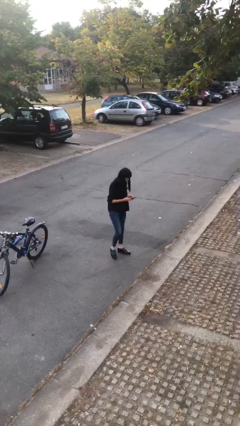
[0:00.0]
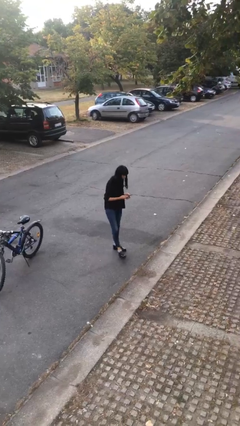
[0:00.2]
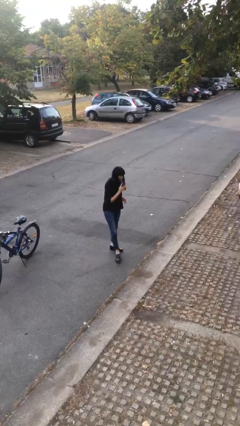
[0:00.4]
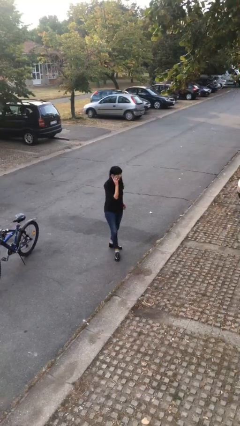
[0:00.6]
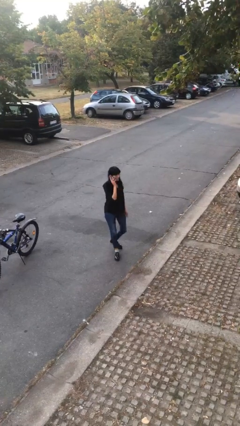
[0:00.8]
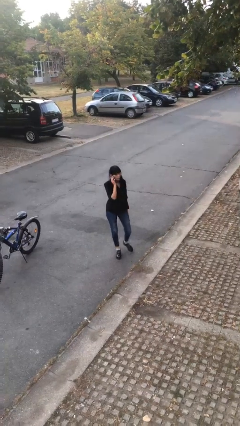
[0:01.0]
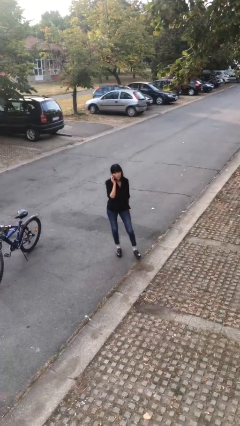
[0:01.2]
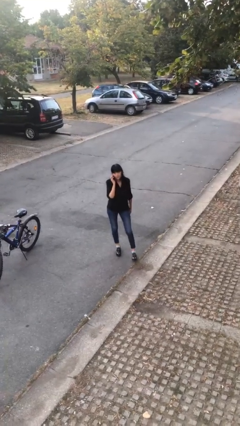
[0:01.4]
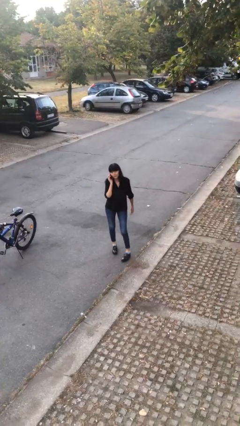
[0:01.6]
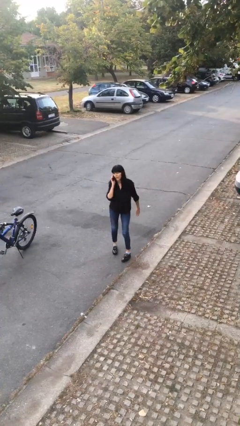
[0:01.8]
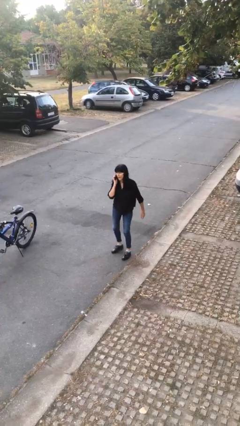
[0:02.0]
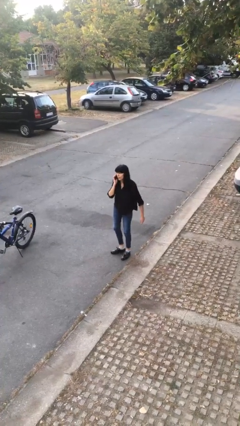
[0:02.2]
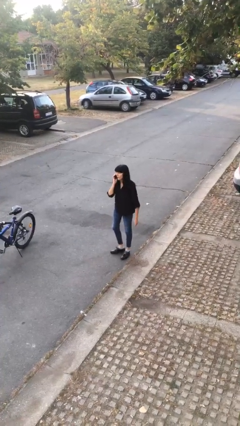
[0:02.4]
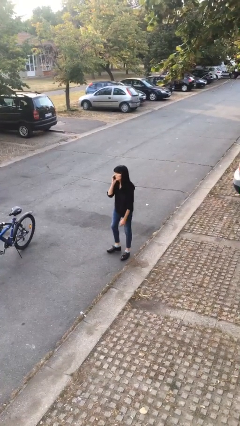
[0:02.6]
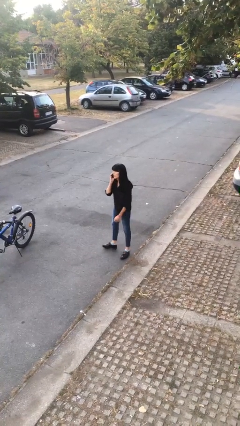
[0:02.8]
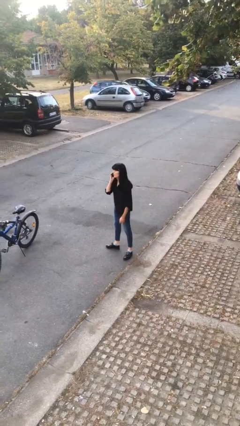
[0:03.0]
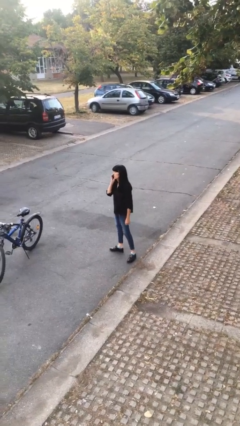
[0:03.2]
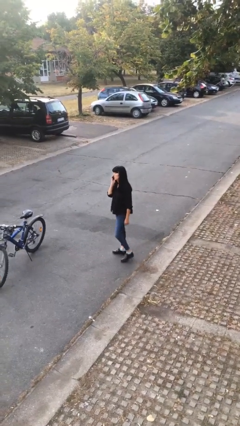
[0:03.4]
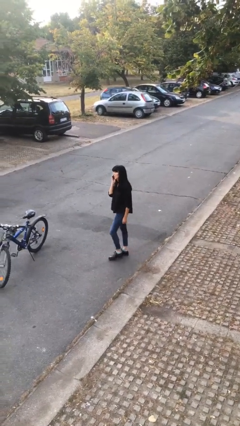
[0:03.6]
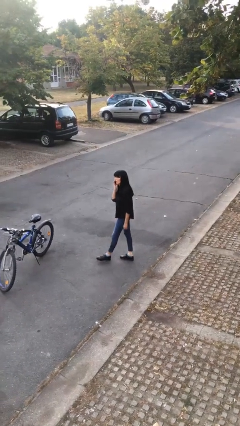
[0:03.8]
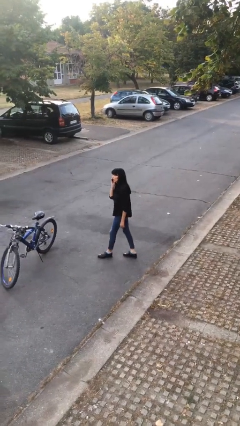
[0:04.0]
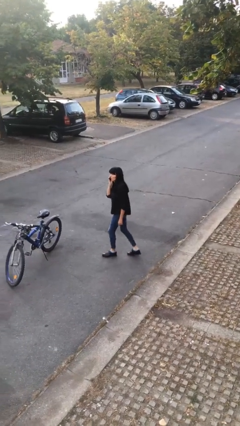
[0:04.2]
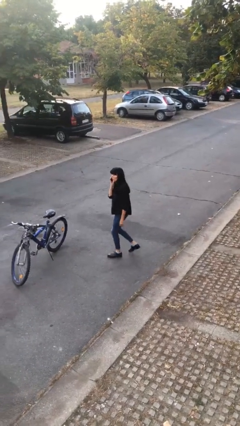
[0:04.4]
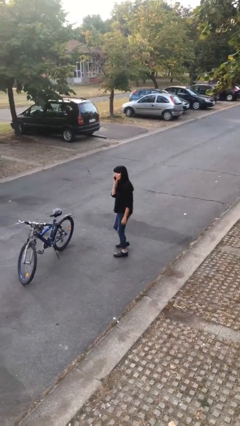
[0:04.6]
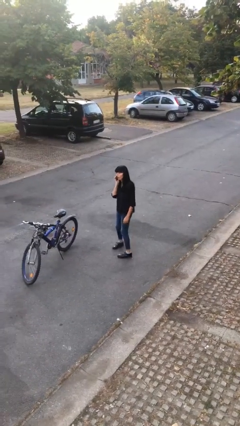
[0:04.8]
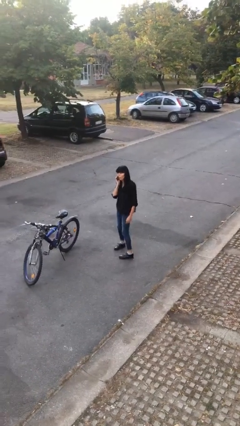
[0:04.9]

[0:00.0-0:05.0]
person talks on phone

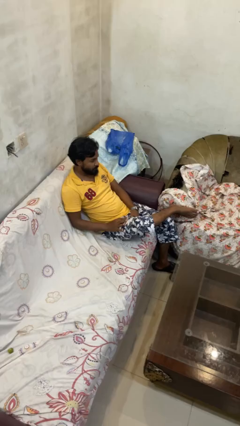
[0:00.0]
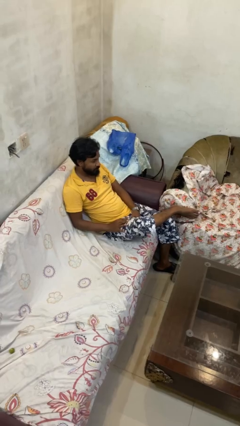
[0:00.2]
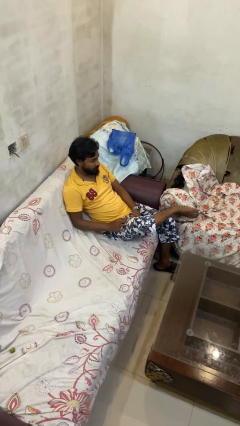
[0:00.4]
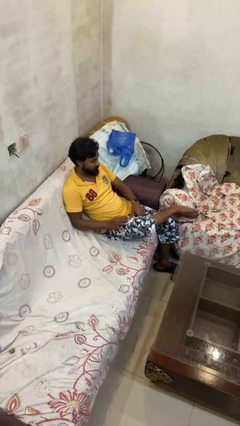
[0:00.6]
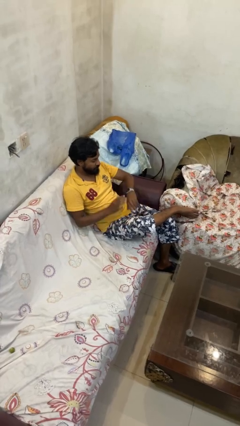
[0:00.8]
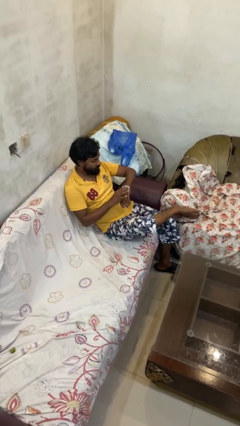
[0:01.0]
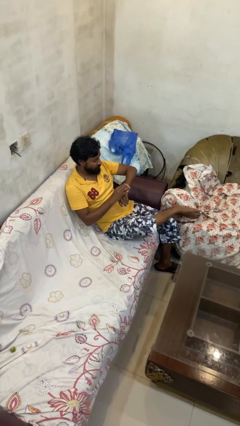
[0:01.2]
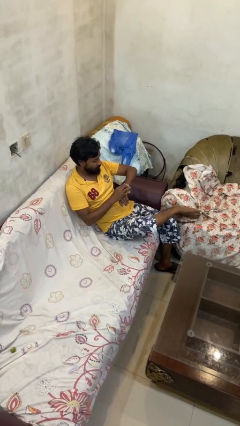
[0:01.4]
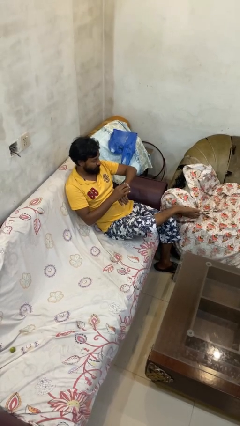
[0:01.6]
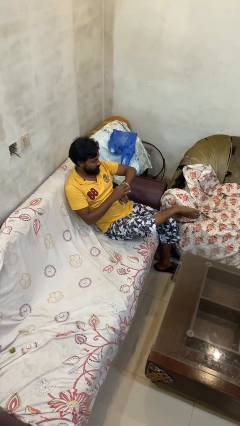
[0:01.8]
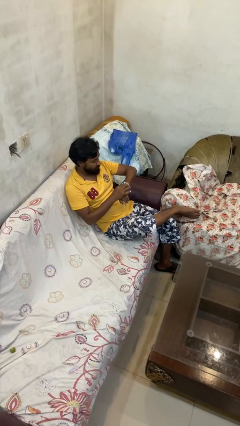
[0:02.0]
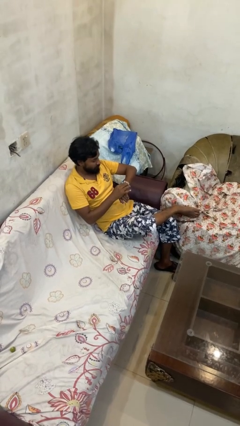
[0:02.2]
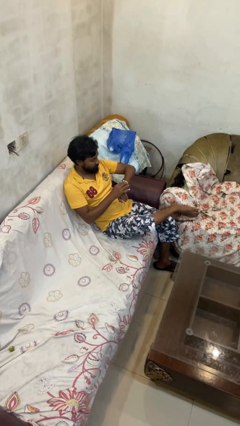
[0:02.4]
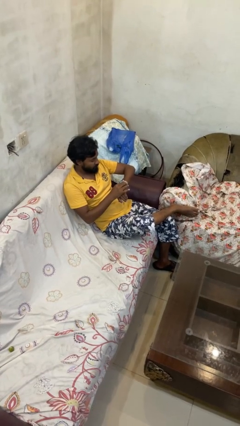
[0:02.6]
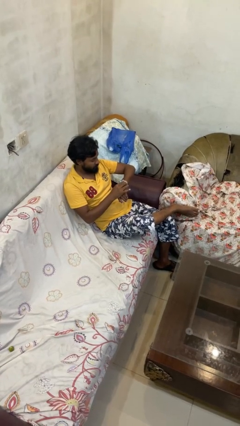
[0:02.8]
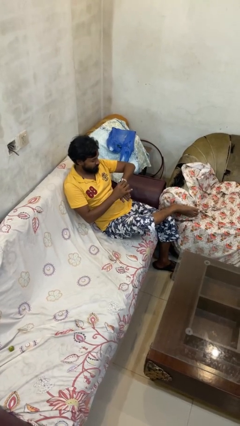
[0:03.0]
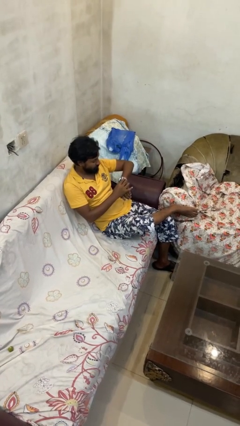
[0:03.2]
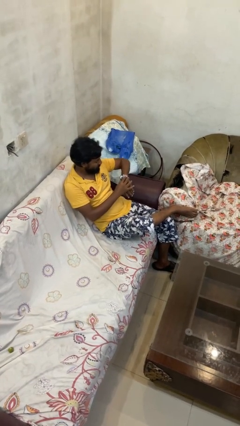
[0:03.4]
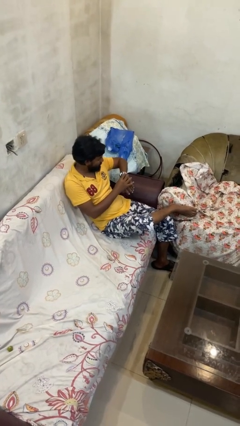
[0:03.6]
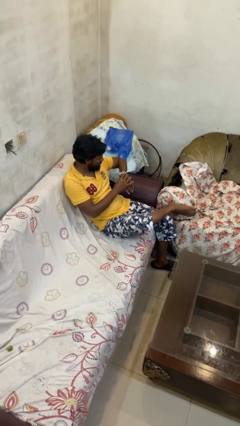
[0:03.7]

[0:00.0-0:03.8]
person looks at wristwatch

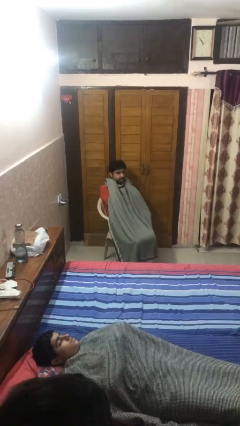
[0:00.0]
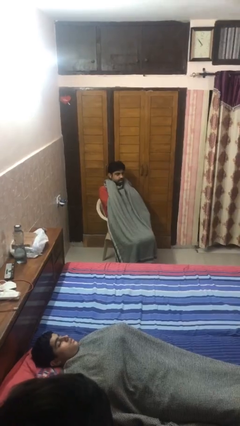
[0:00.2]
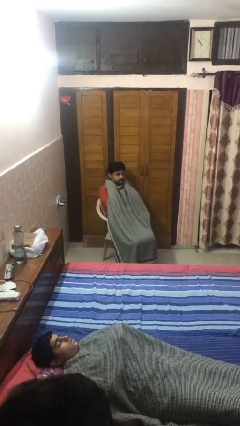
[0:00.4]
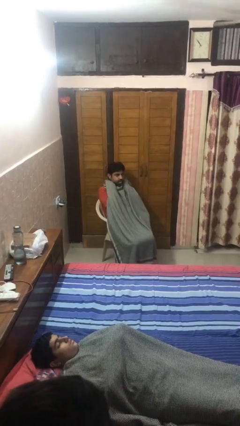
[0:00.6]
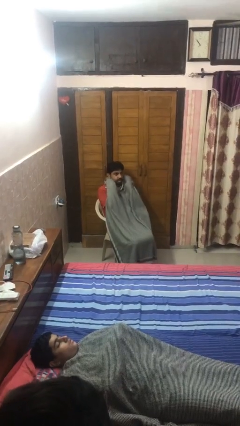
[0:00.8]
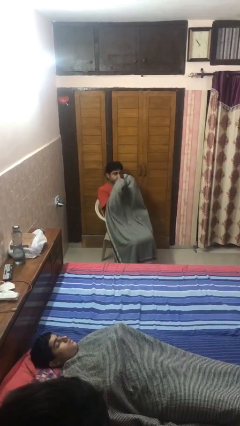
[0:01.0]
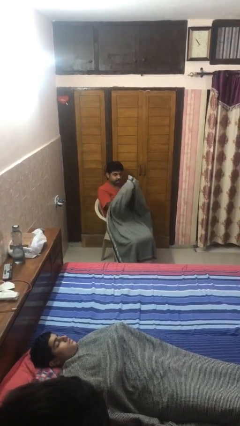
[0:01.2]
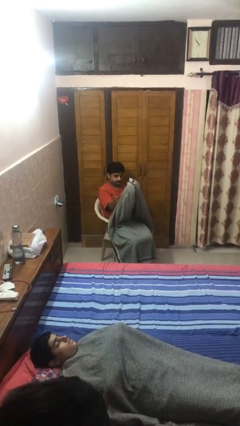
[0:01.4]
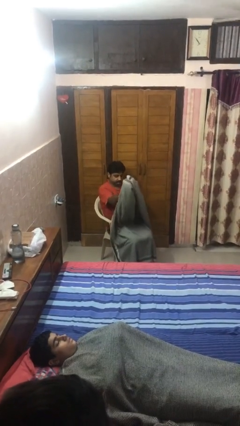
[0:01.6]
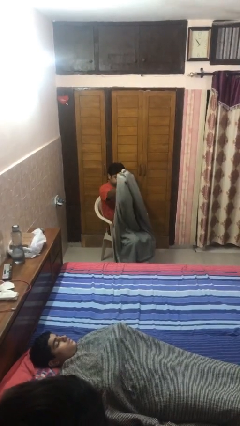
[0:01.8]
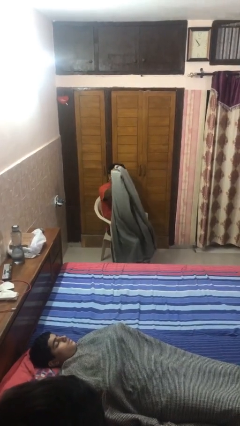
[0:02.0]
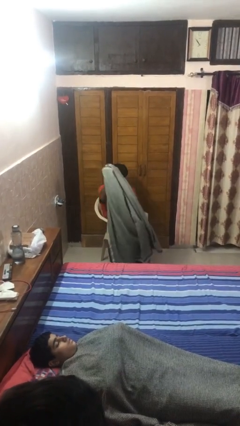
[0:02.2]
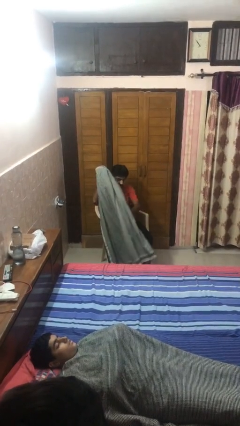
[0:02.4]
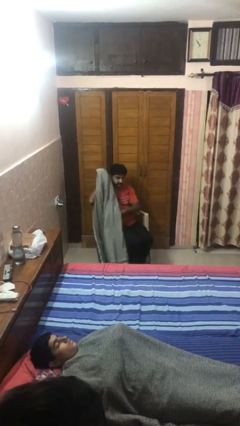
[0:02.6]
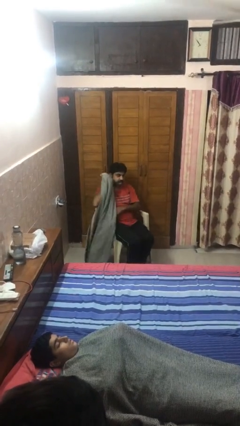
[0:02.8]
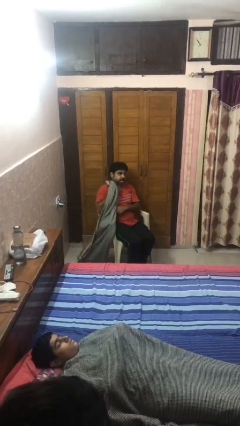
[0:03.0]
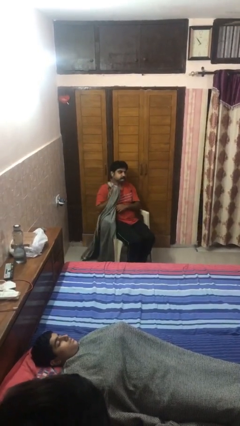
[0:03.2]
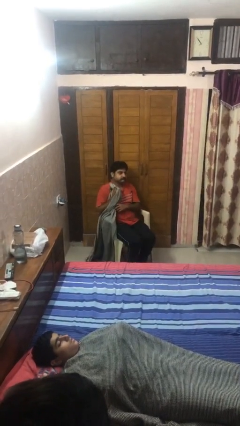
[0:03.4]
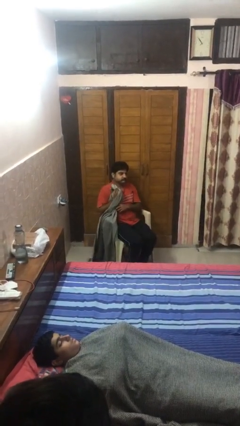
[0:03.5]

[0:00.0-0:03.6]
person uncovers with blanket

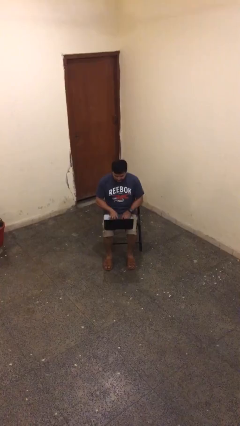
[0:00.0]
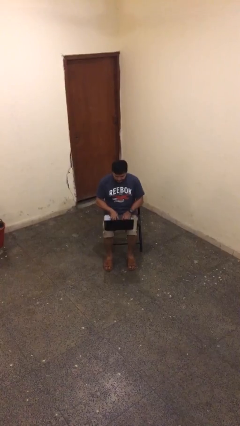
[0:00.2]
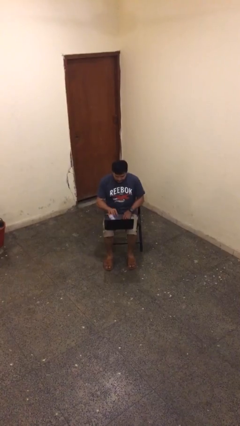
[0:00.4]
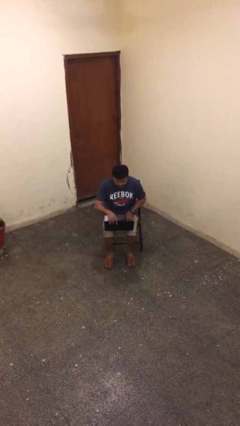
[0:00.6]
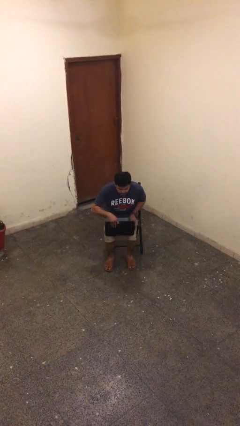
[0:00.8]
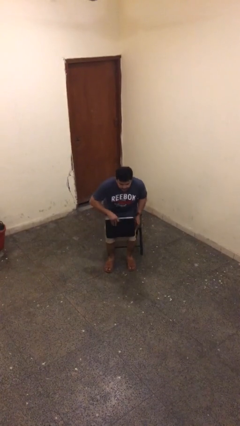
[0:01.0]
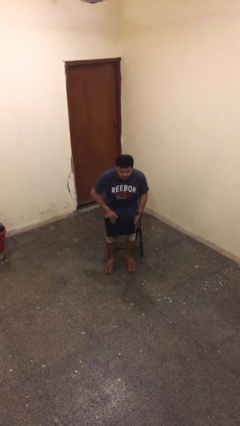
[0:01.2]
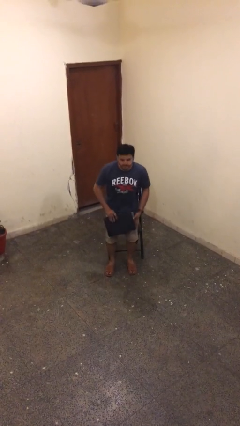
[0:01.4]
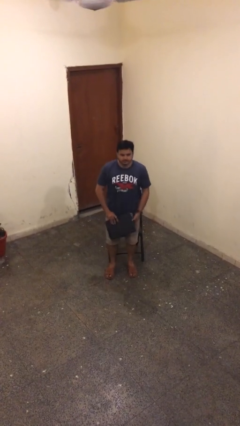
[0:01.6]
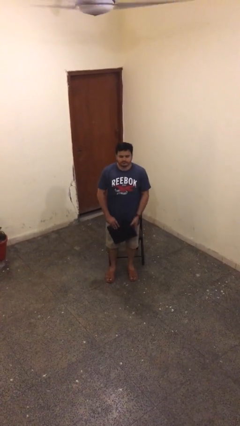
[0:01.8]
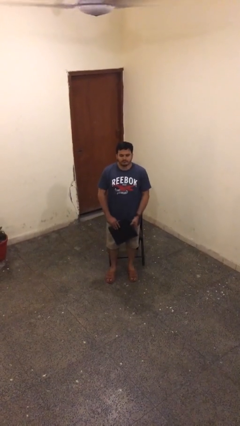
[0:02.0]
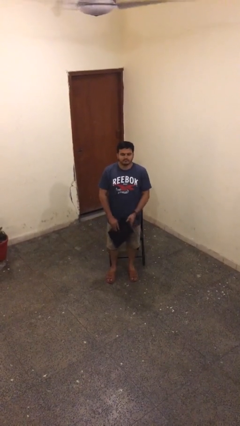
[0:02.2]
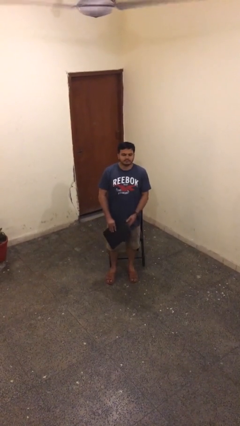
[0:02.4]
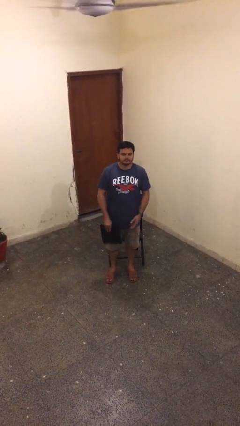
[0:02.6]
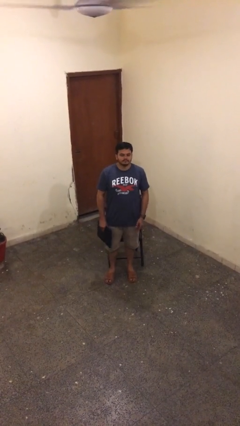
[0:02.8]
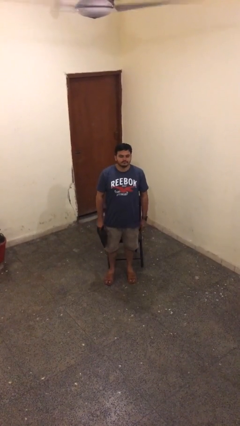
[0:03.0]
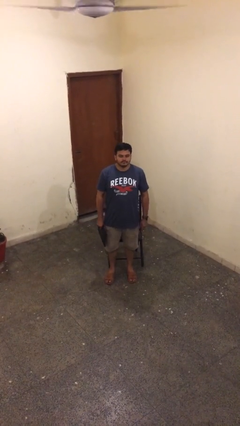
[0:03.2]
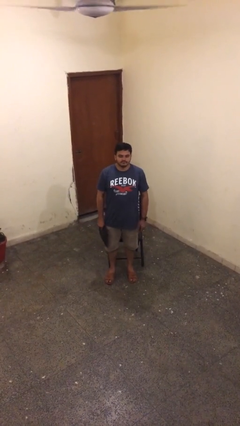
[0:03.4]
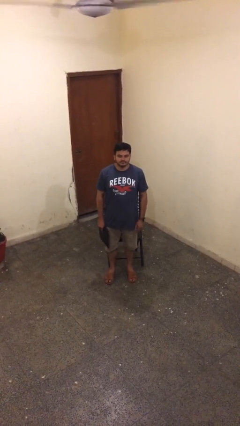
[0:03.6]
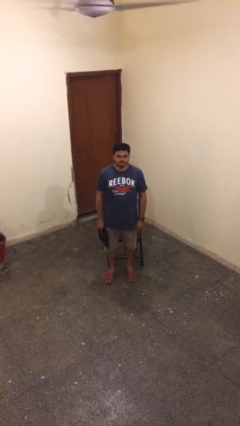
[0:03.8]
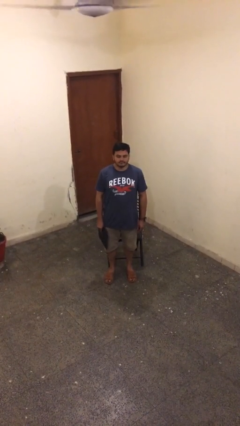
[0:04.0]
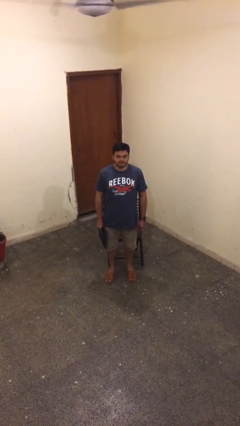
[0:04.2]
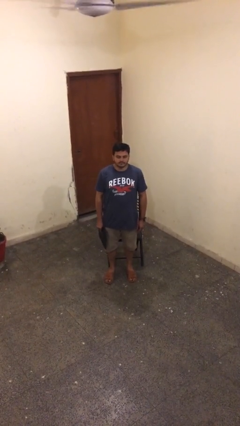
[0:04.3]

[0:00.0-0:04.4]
person stands up

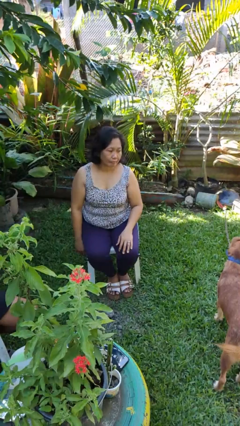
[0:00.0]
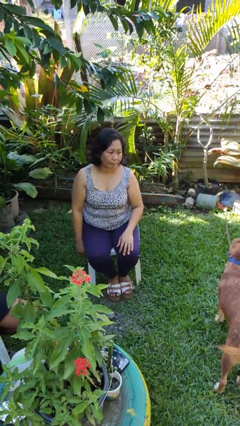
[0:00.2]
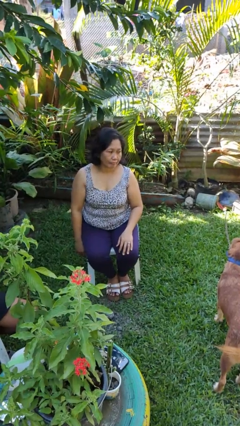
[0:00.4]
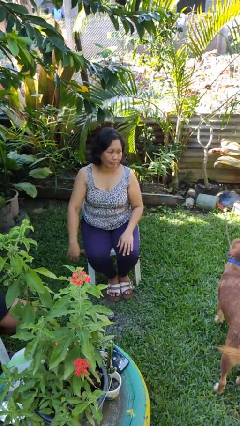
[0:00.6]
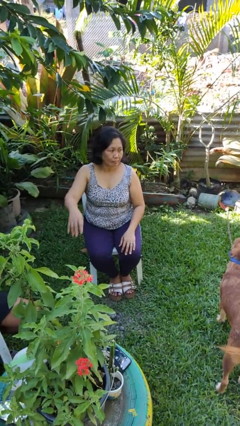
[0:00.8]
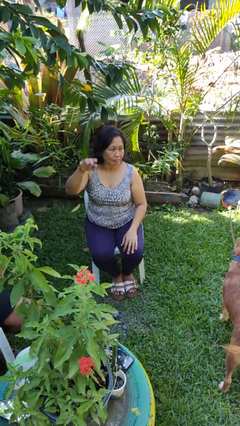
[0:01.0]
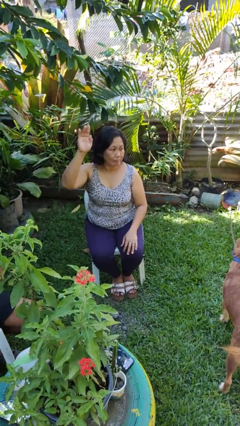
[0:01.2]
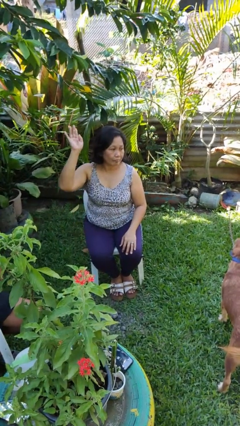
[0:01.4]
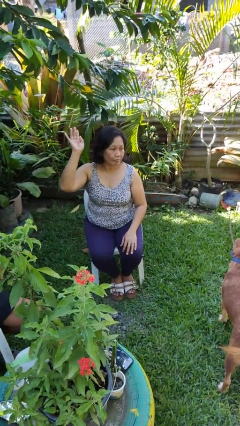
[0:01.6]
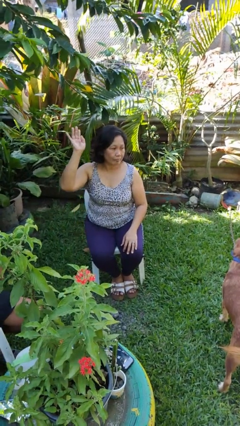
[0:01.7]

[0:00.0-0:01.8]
person gestures raise hand
